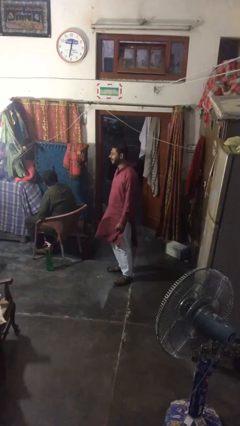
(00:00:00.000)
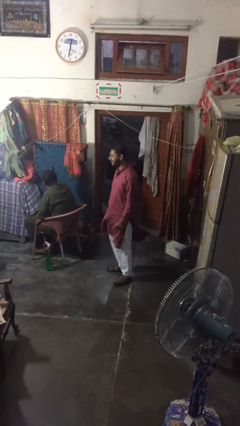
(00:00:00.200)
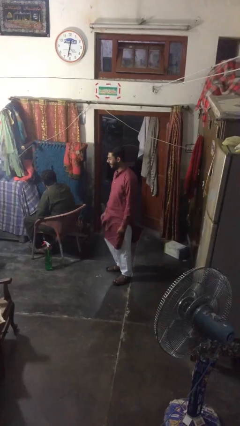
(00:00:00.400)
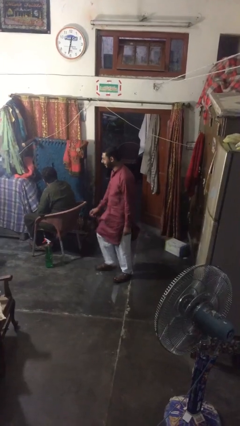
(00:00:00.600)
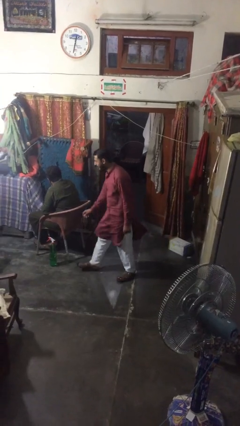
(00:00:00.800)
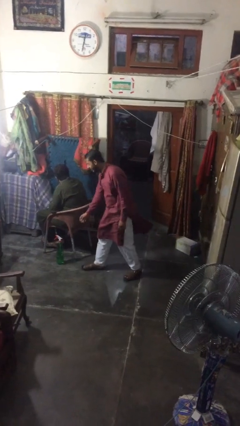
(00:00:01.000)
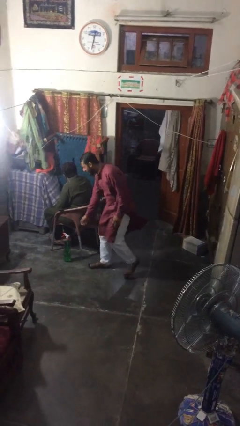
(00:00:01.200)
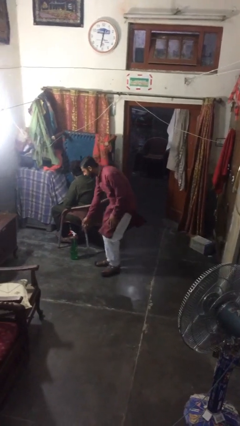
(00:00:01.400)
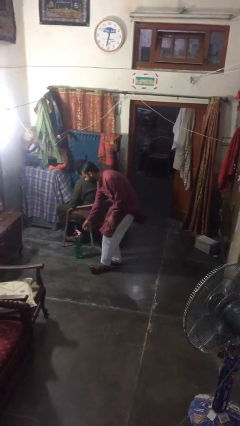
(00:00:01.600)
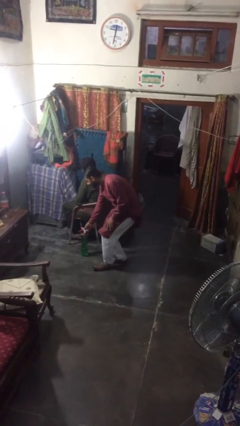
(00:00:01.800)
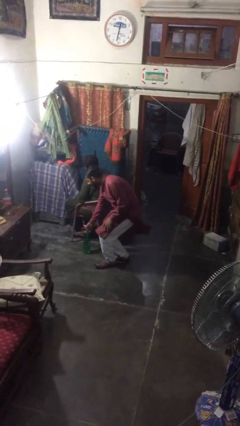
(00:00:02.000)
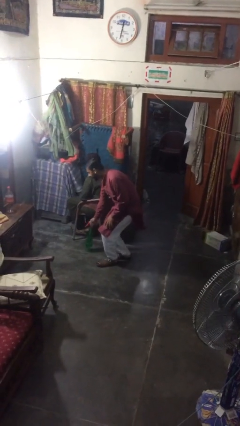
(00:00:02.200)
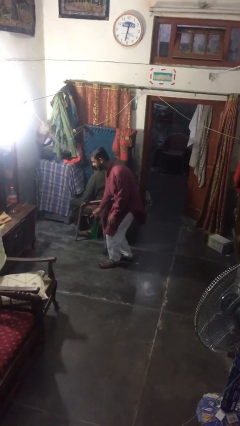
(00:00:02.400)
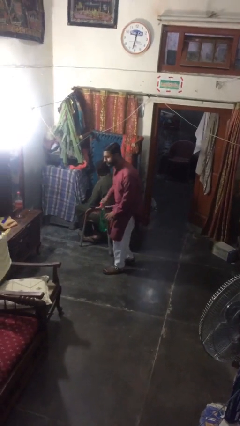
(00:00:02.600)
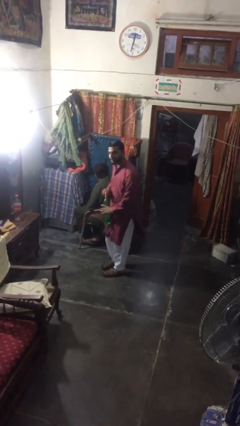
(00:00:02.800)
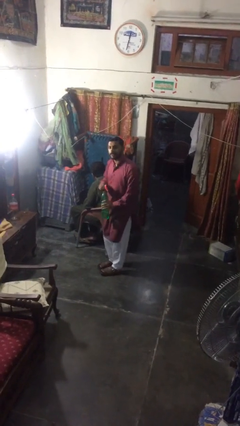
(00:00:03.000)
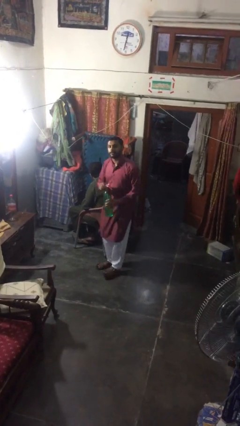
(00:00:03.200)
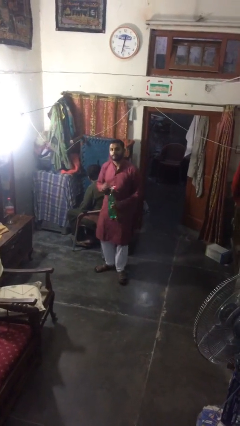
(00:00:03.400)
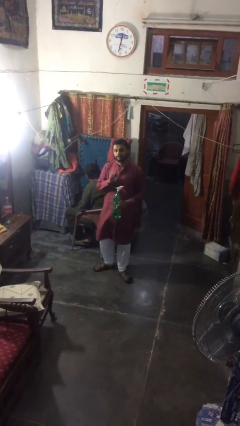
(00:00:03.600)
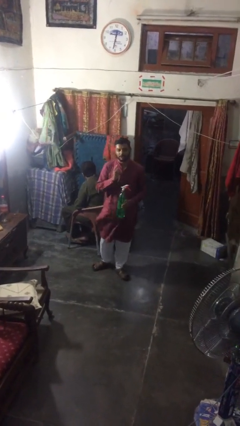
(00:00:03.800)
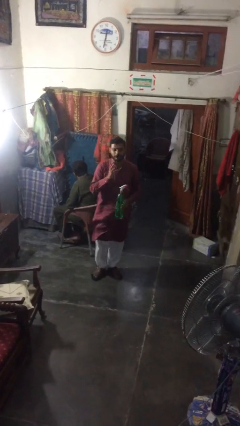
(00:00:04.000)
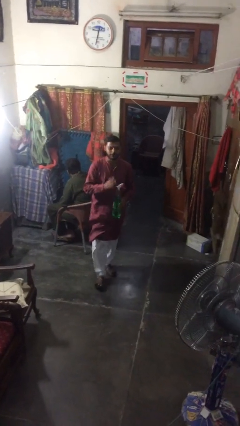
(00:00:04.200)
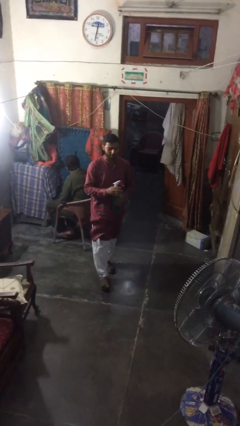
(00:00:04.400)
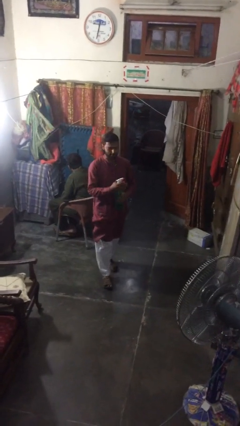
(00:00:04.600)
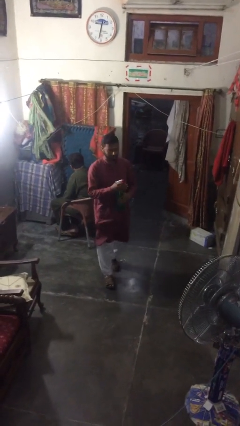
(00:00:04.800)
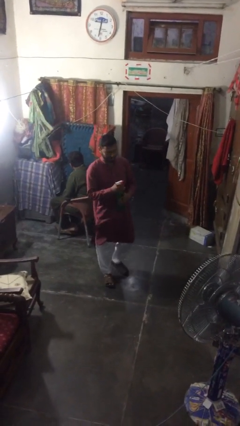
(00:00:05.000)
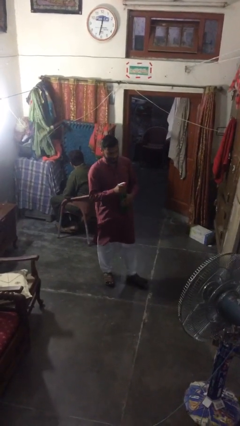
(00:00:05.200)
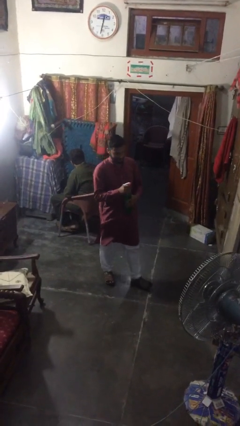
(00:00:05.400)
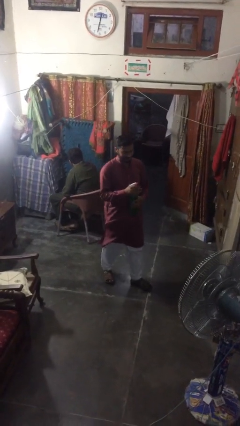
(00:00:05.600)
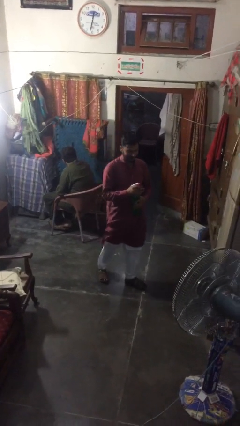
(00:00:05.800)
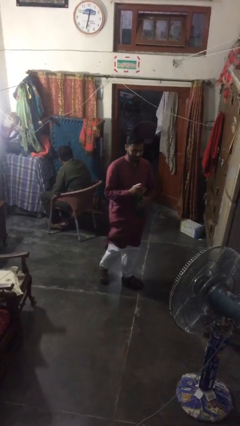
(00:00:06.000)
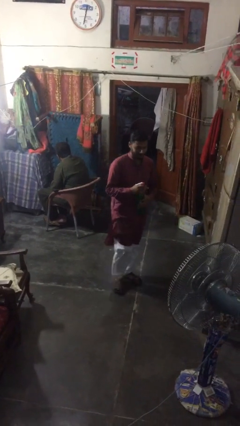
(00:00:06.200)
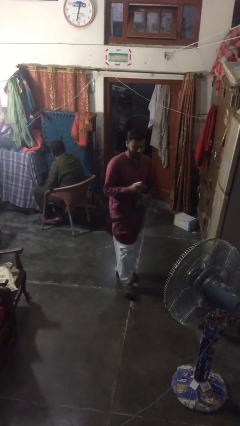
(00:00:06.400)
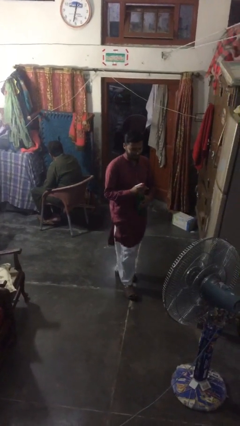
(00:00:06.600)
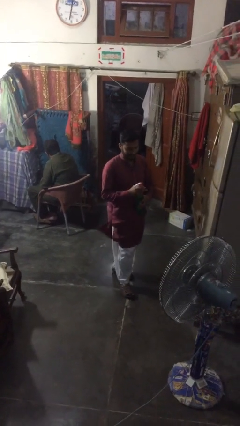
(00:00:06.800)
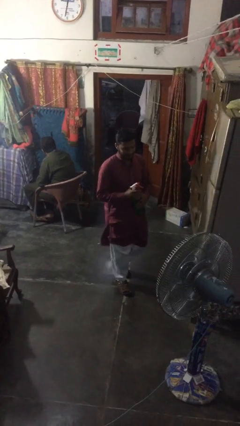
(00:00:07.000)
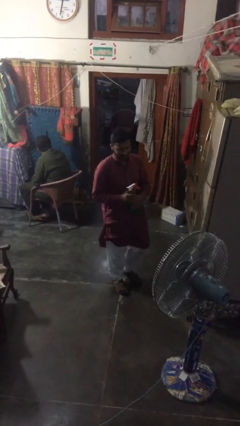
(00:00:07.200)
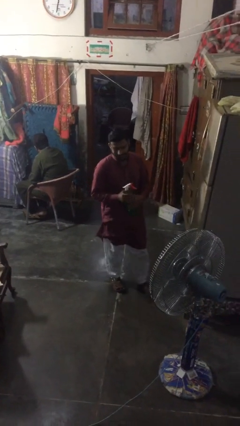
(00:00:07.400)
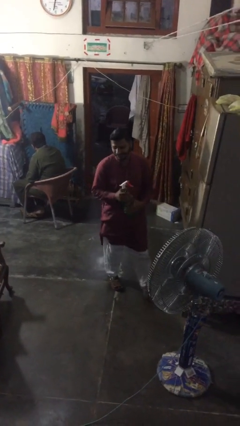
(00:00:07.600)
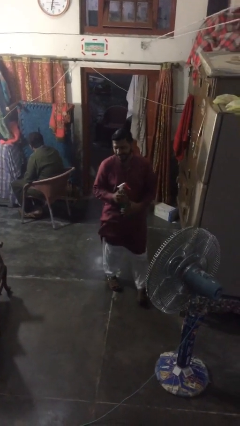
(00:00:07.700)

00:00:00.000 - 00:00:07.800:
person steals object from person

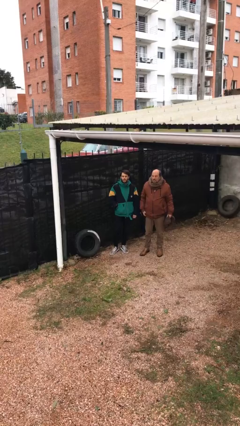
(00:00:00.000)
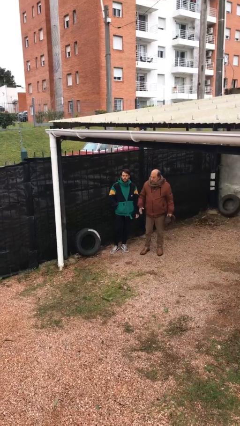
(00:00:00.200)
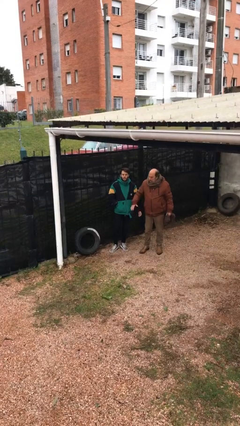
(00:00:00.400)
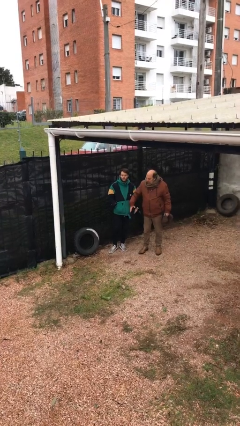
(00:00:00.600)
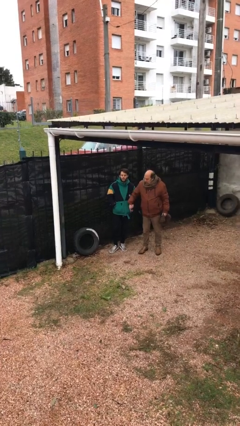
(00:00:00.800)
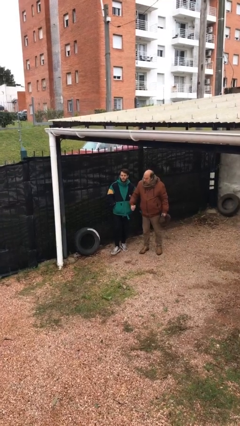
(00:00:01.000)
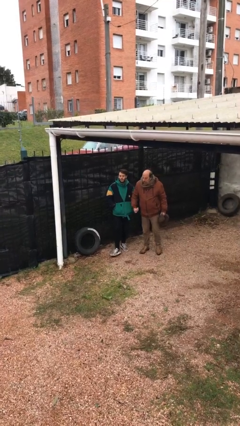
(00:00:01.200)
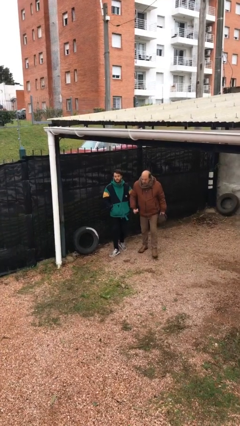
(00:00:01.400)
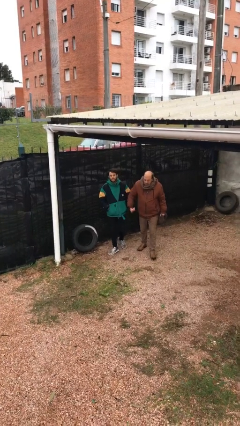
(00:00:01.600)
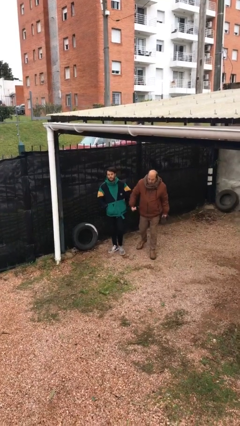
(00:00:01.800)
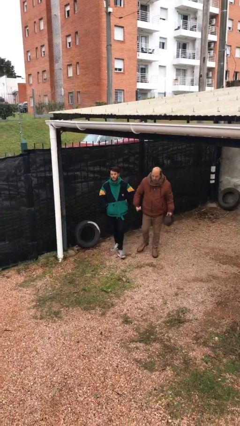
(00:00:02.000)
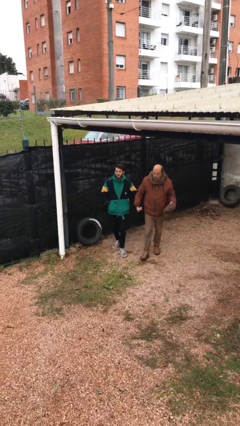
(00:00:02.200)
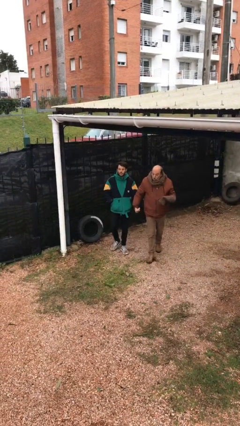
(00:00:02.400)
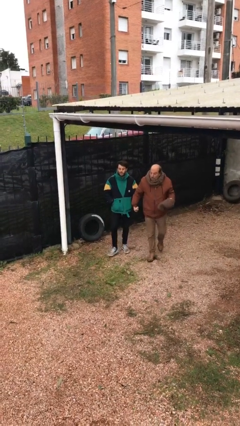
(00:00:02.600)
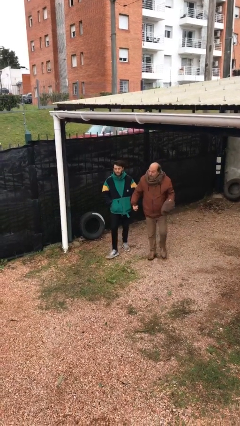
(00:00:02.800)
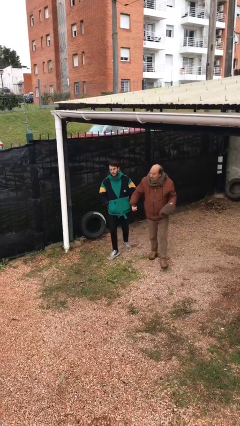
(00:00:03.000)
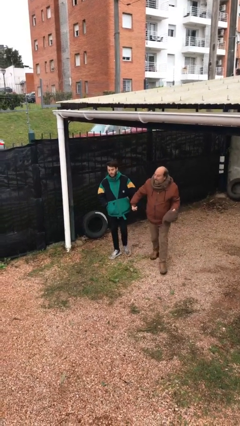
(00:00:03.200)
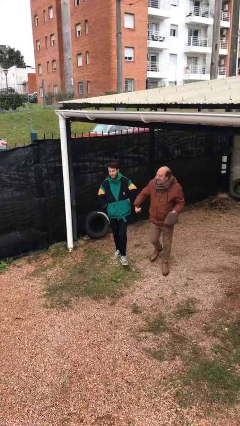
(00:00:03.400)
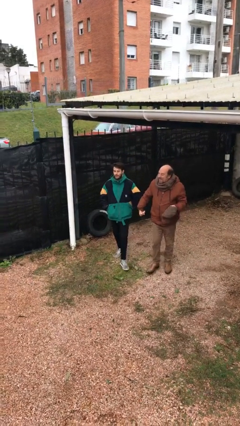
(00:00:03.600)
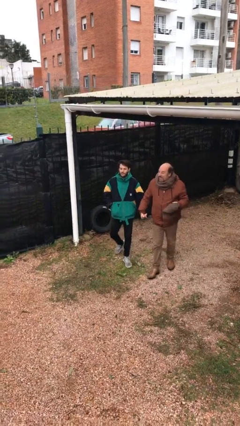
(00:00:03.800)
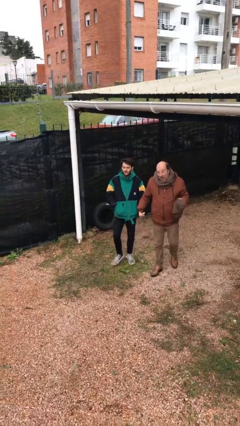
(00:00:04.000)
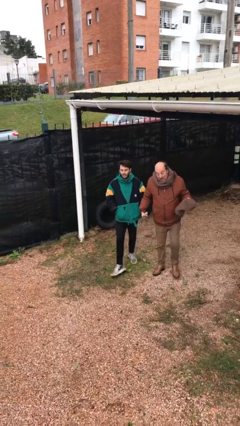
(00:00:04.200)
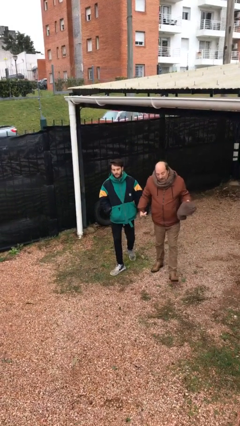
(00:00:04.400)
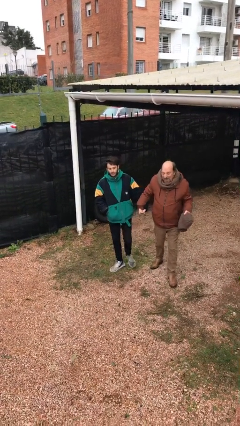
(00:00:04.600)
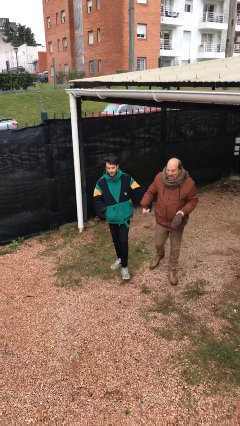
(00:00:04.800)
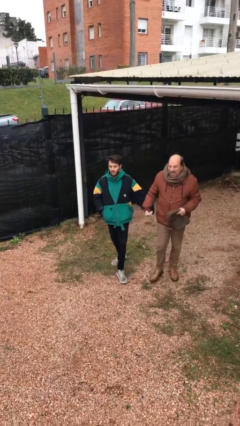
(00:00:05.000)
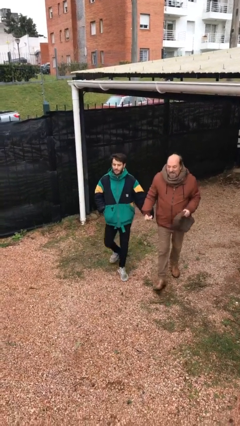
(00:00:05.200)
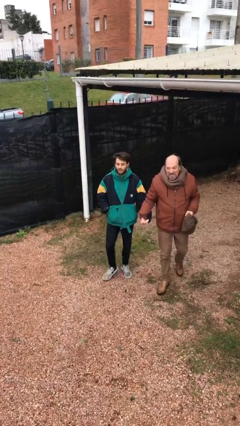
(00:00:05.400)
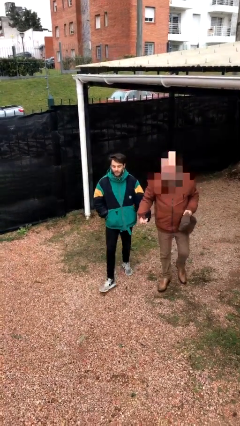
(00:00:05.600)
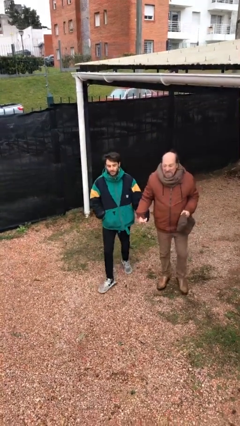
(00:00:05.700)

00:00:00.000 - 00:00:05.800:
person holds hand

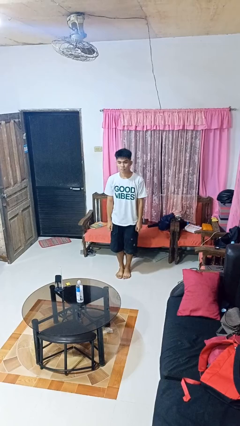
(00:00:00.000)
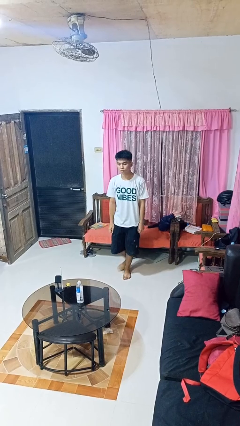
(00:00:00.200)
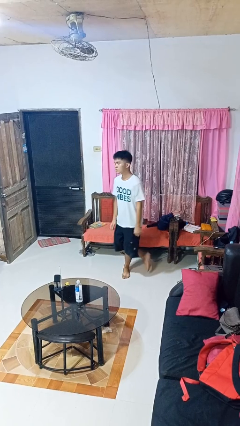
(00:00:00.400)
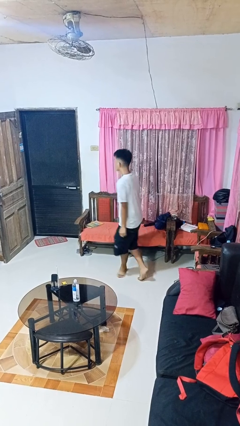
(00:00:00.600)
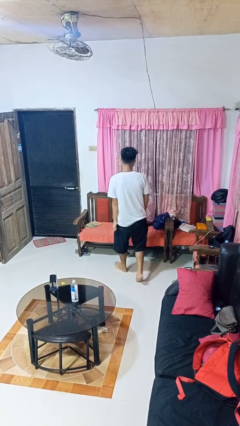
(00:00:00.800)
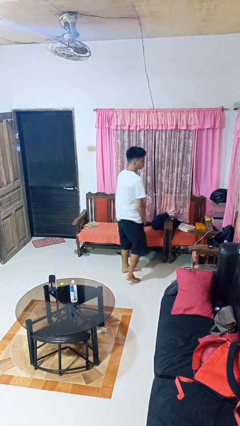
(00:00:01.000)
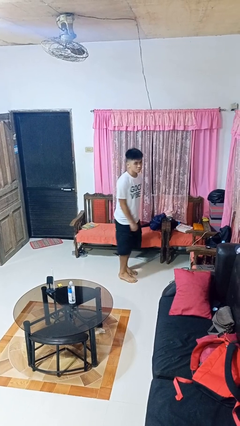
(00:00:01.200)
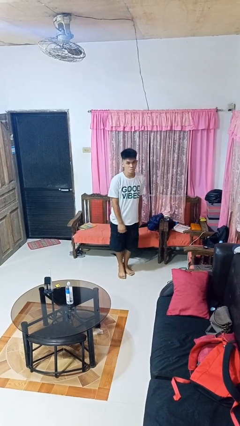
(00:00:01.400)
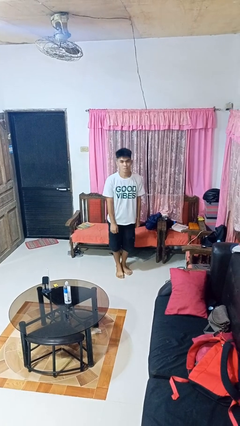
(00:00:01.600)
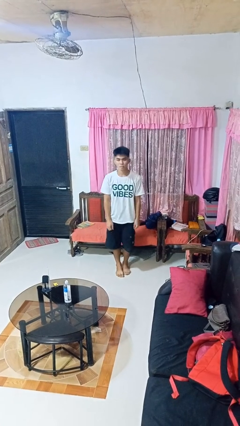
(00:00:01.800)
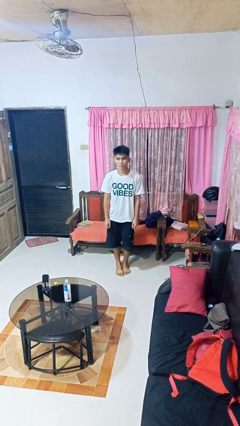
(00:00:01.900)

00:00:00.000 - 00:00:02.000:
person twirls

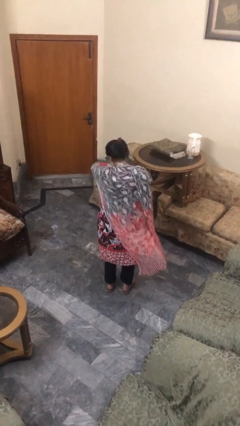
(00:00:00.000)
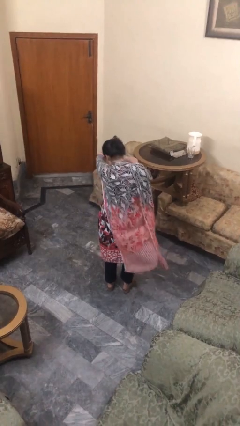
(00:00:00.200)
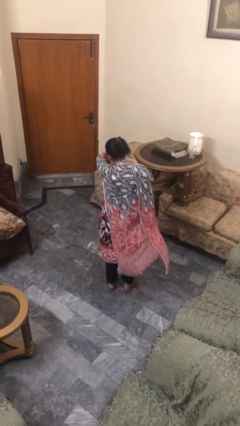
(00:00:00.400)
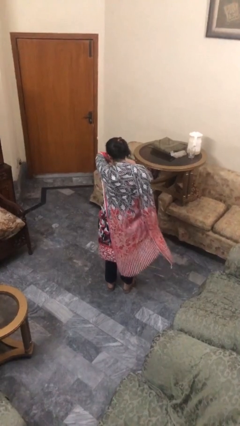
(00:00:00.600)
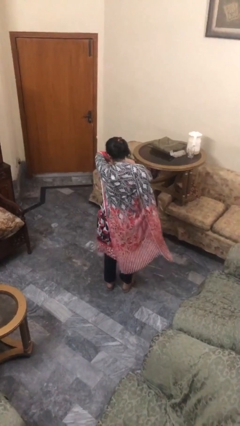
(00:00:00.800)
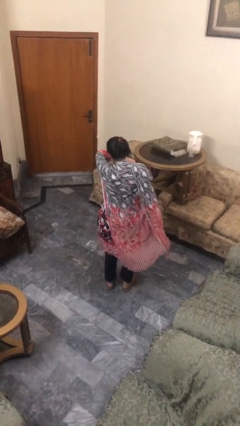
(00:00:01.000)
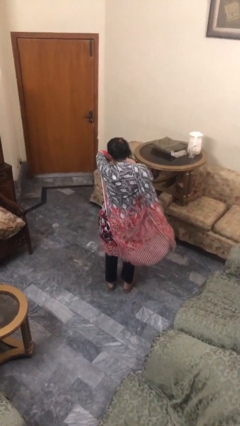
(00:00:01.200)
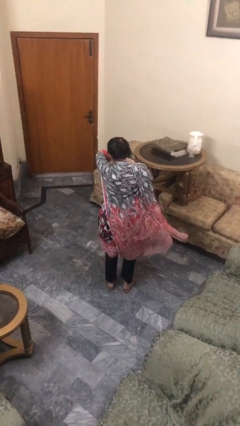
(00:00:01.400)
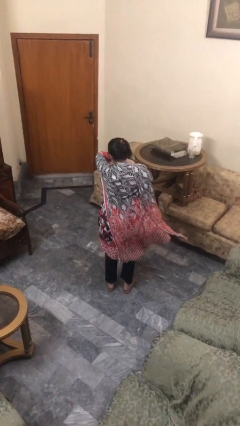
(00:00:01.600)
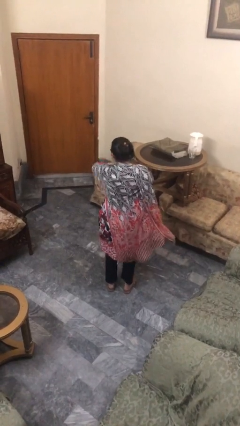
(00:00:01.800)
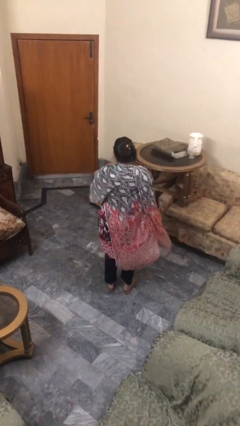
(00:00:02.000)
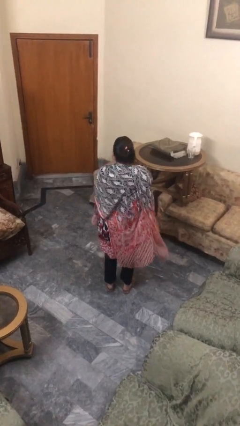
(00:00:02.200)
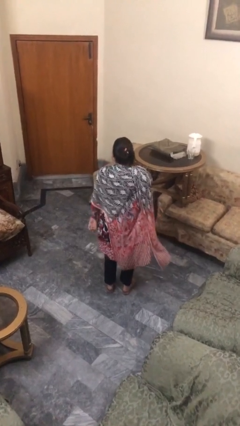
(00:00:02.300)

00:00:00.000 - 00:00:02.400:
person sneezes into arm
